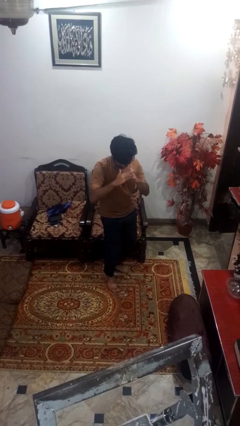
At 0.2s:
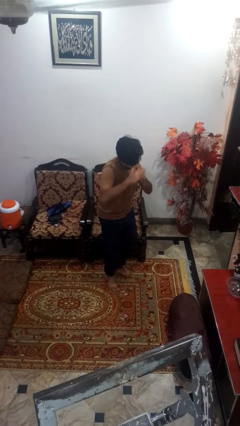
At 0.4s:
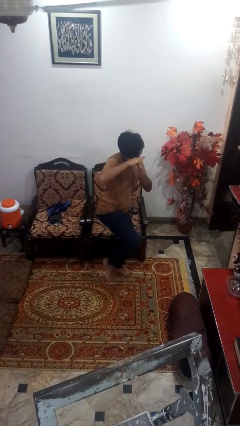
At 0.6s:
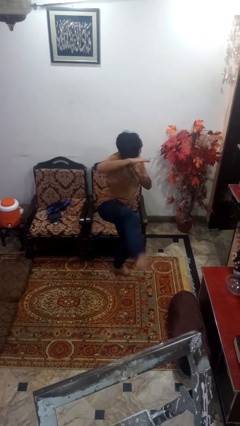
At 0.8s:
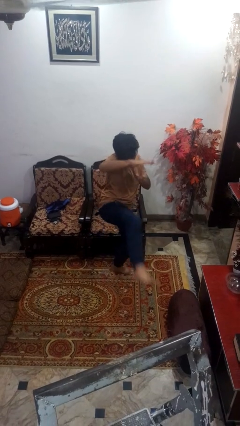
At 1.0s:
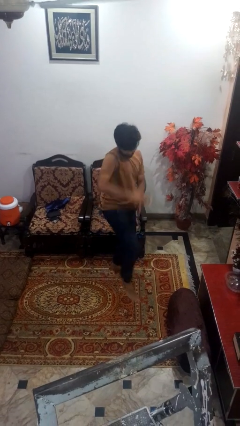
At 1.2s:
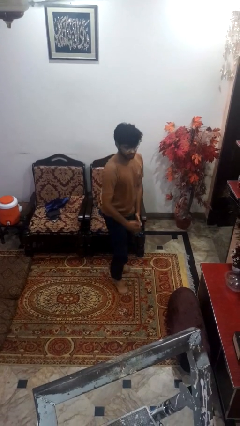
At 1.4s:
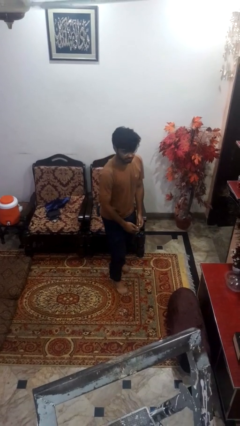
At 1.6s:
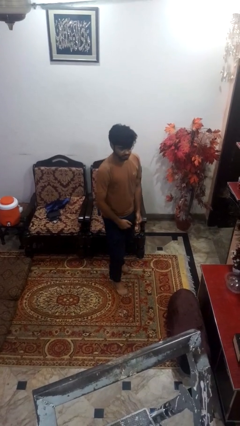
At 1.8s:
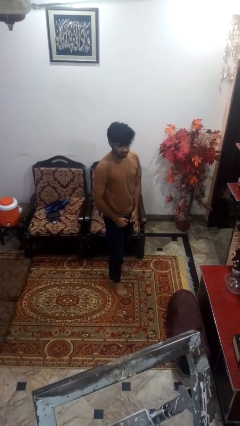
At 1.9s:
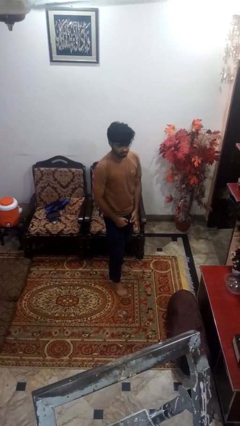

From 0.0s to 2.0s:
person karate kicks

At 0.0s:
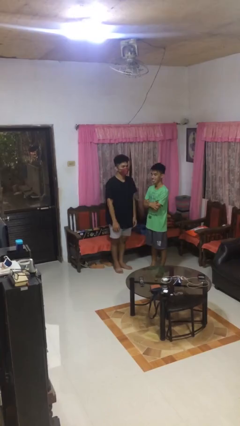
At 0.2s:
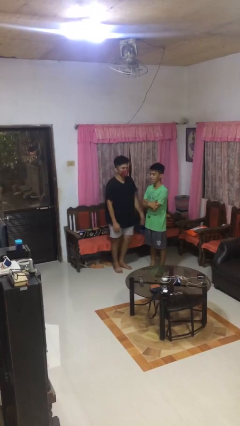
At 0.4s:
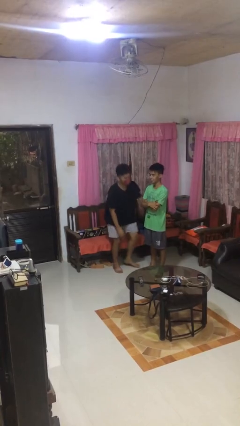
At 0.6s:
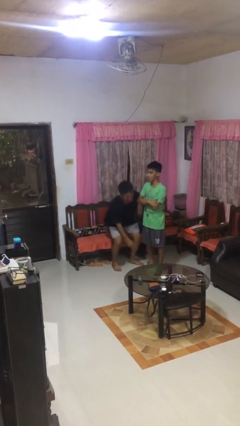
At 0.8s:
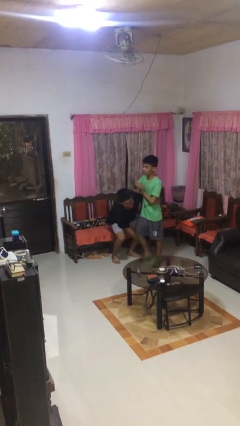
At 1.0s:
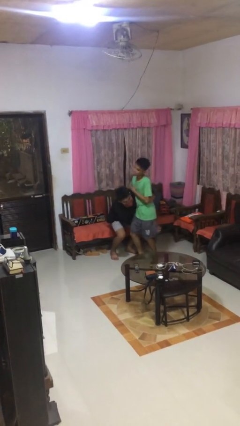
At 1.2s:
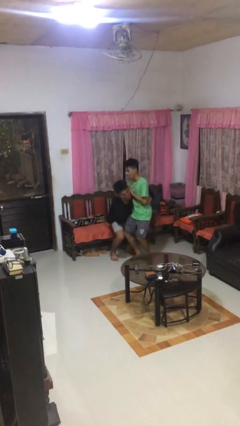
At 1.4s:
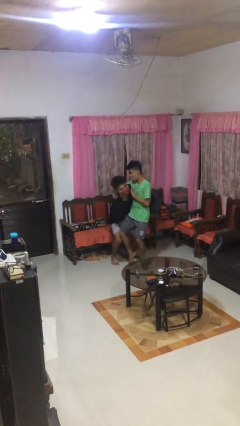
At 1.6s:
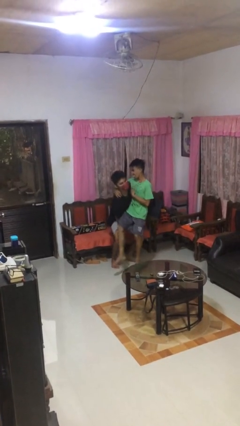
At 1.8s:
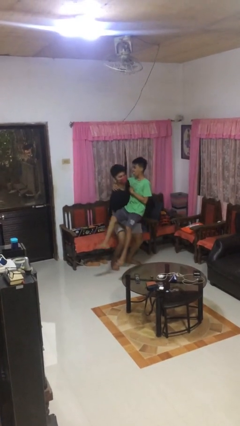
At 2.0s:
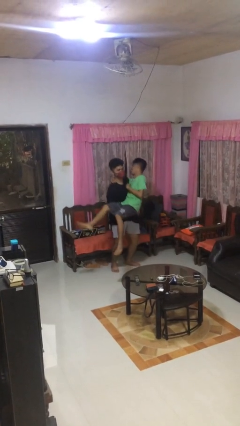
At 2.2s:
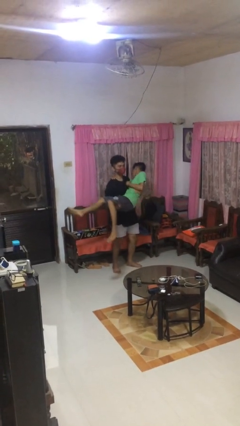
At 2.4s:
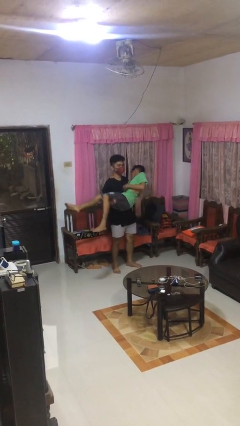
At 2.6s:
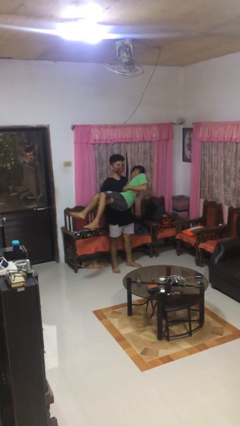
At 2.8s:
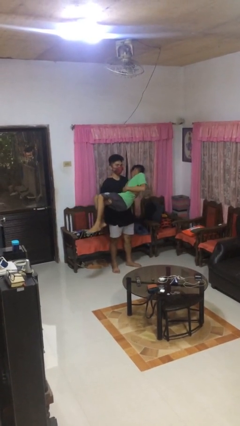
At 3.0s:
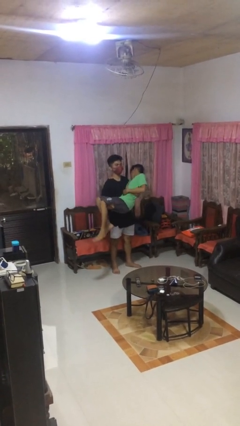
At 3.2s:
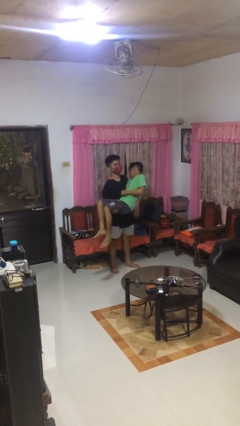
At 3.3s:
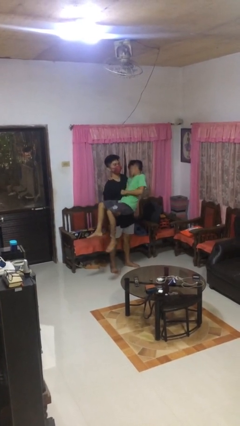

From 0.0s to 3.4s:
person picks up person

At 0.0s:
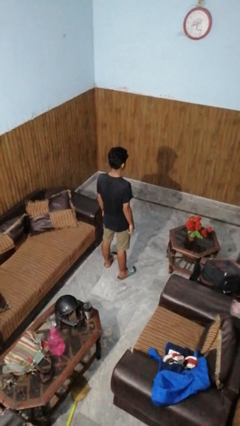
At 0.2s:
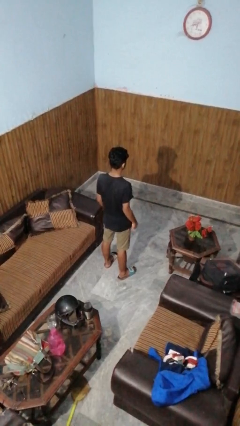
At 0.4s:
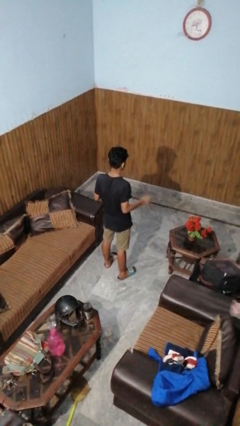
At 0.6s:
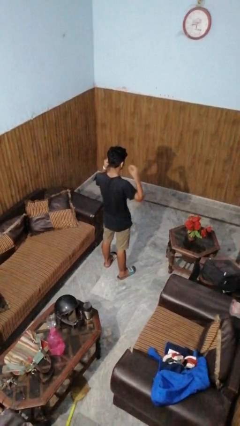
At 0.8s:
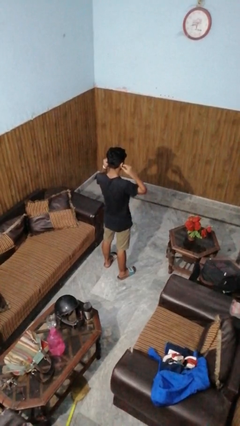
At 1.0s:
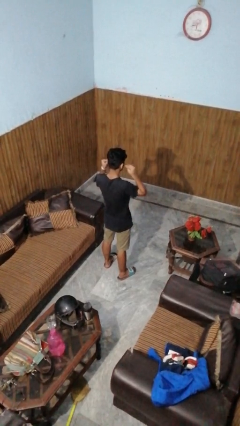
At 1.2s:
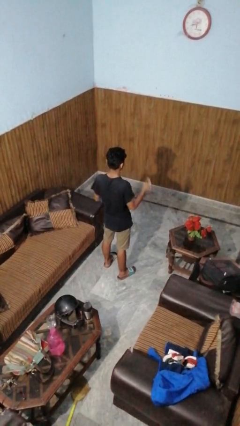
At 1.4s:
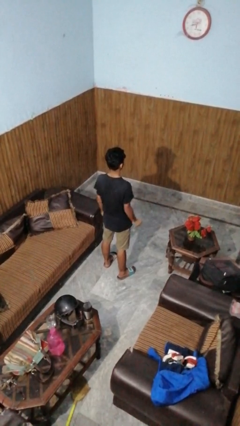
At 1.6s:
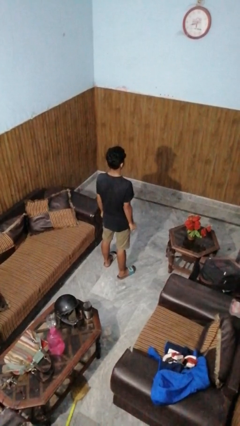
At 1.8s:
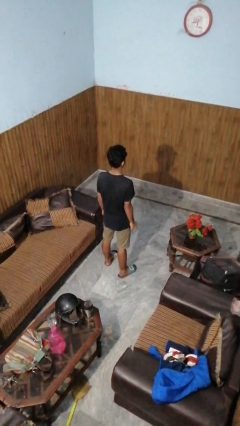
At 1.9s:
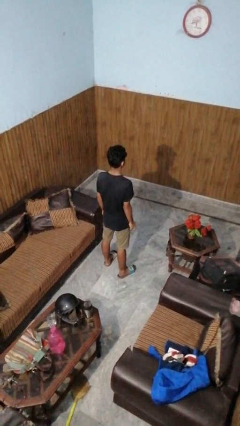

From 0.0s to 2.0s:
person takes off headphones

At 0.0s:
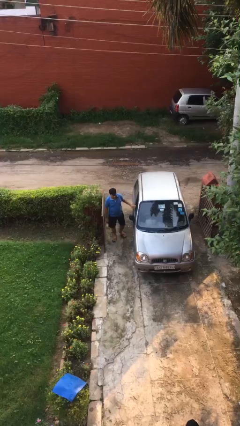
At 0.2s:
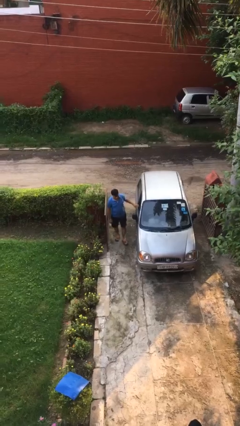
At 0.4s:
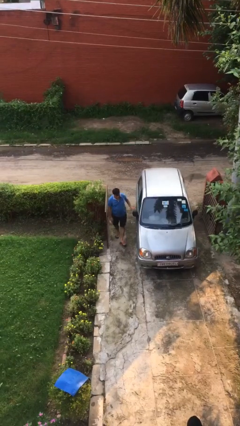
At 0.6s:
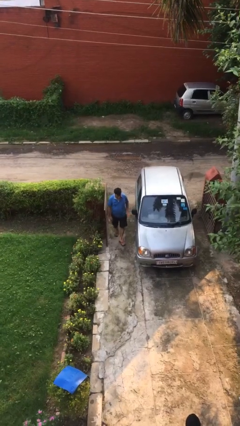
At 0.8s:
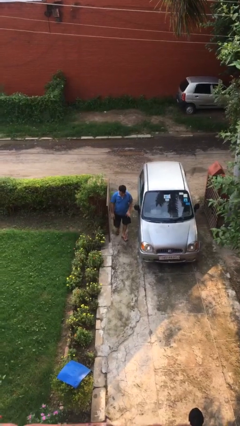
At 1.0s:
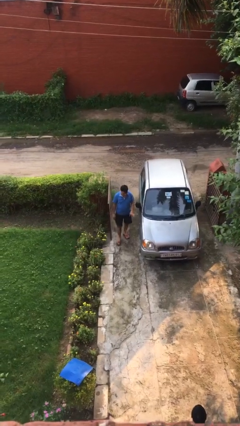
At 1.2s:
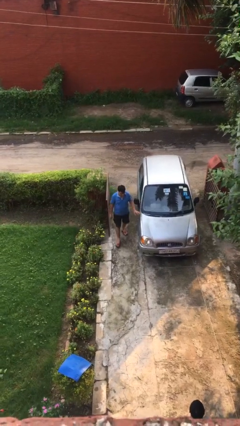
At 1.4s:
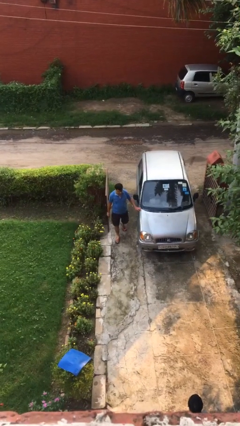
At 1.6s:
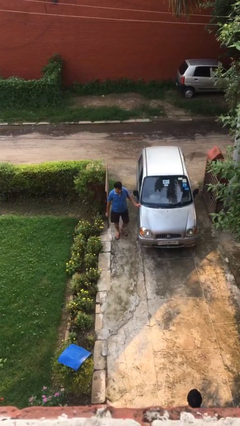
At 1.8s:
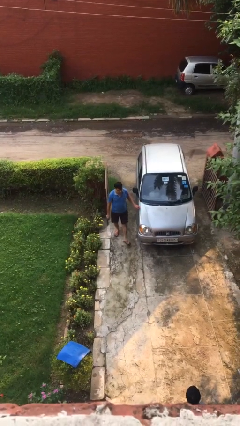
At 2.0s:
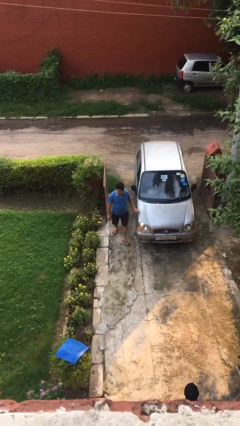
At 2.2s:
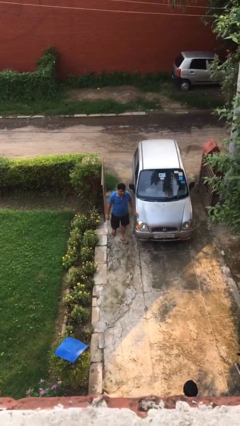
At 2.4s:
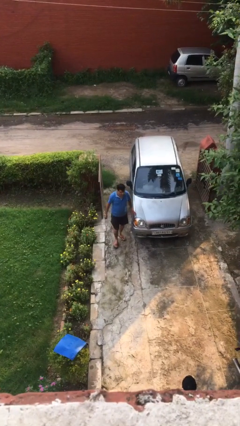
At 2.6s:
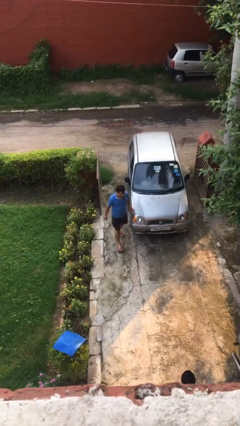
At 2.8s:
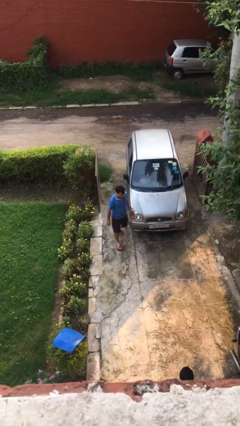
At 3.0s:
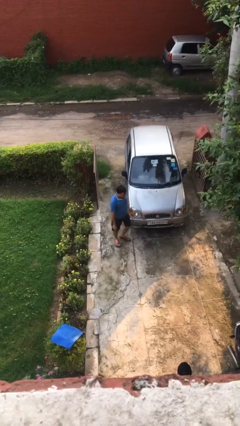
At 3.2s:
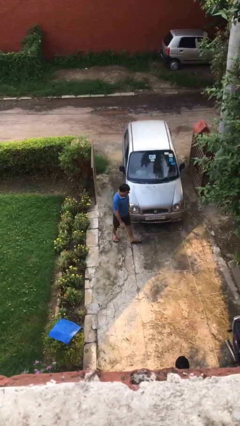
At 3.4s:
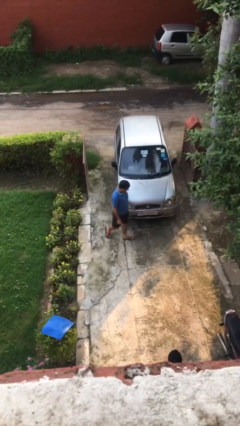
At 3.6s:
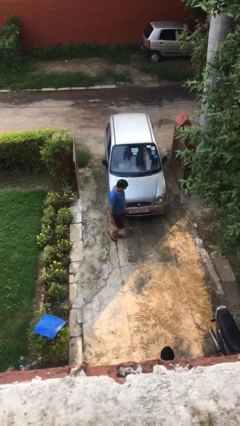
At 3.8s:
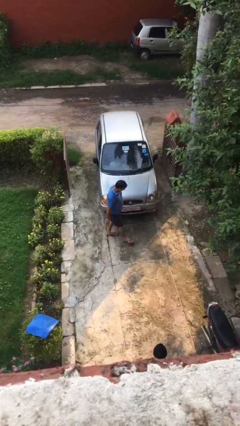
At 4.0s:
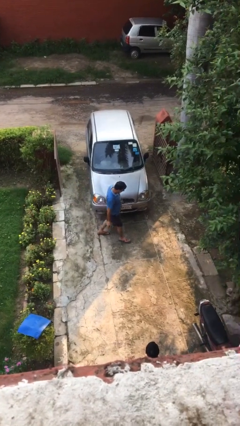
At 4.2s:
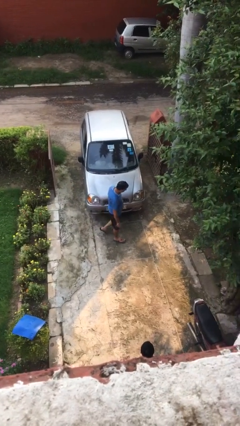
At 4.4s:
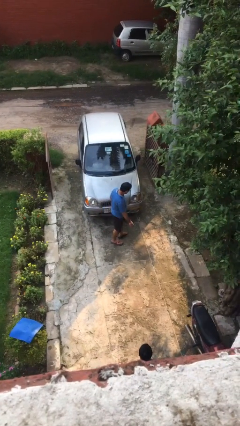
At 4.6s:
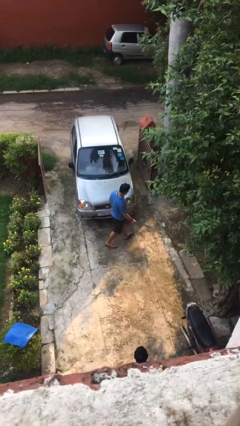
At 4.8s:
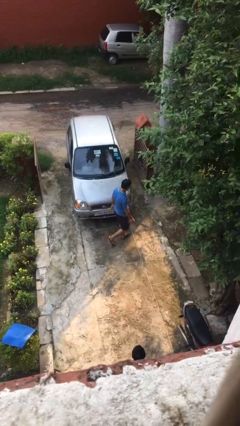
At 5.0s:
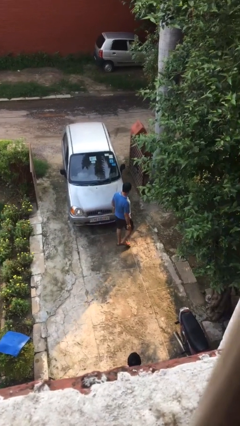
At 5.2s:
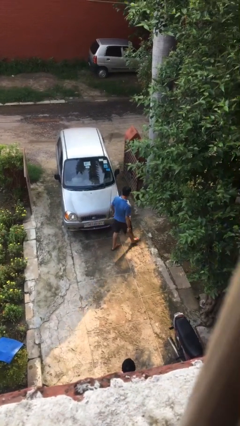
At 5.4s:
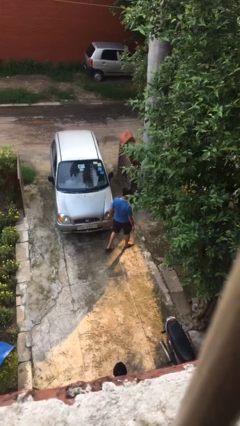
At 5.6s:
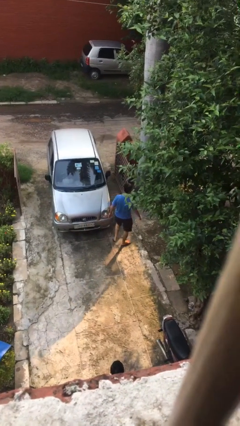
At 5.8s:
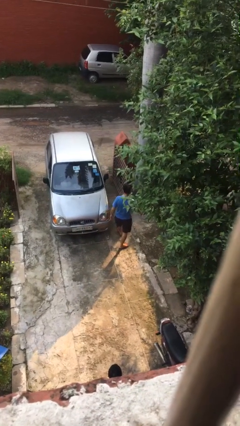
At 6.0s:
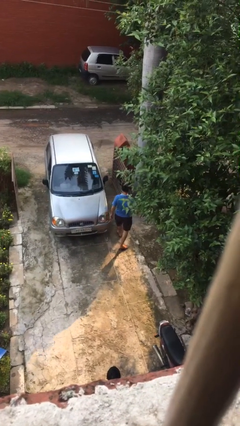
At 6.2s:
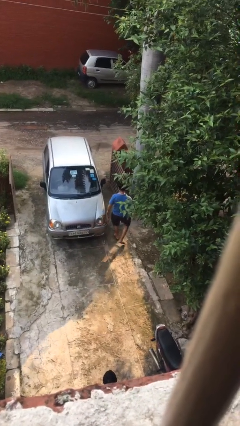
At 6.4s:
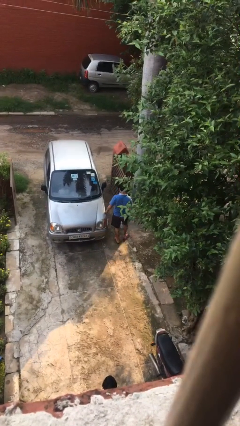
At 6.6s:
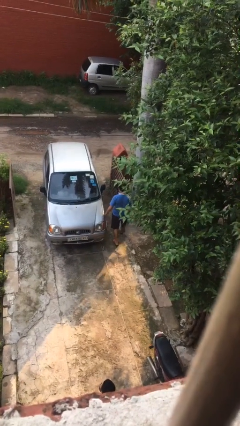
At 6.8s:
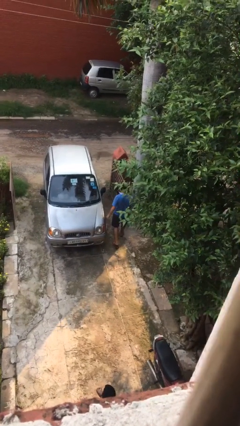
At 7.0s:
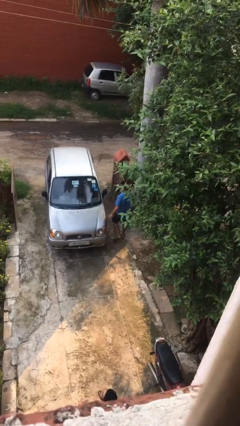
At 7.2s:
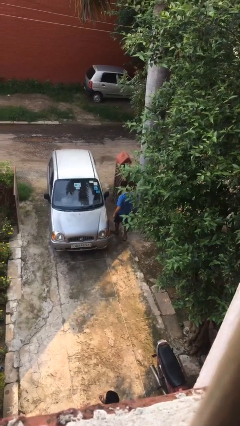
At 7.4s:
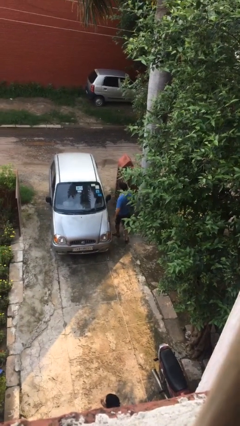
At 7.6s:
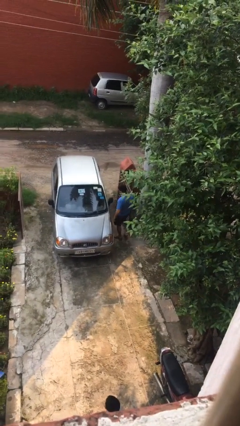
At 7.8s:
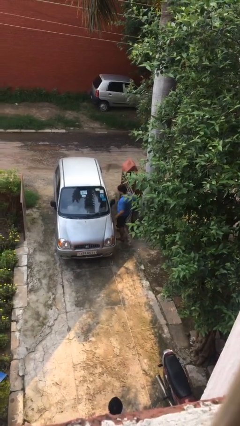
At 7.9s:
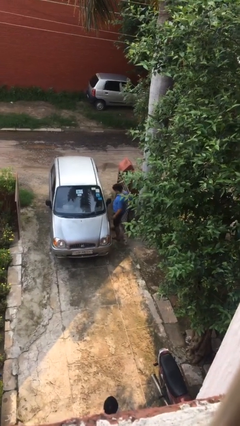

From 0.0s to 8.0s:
person walks around car

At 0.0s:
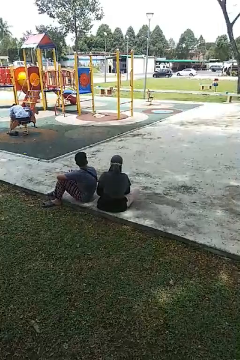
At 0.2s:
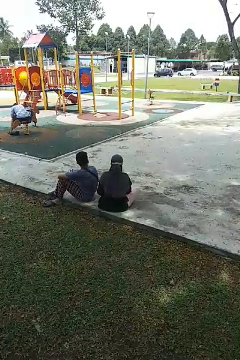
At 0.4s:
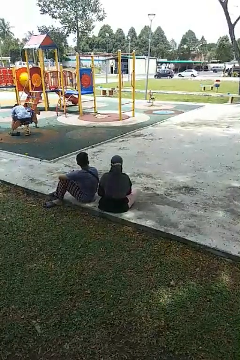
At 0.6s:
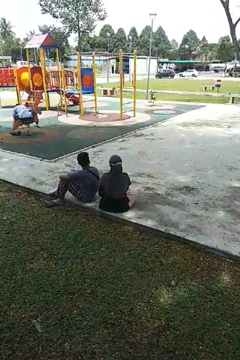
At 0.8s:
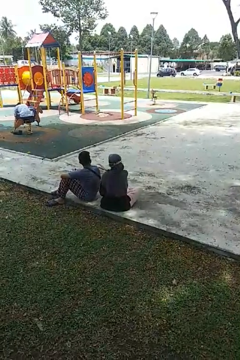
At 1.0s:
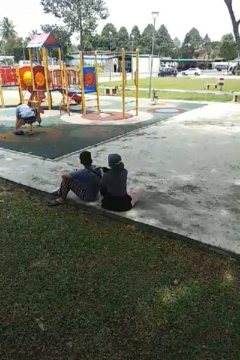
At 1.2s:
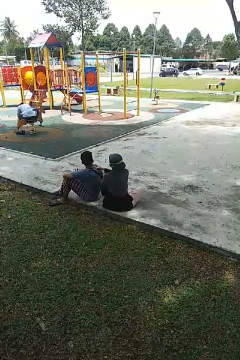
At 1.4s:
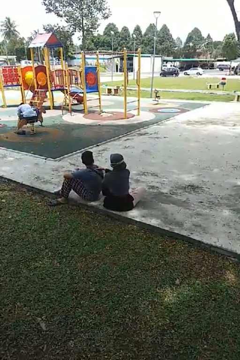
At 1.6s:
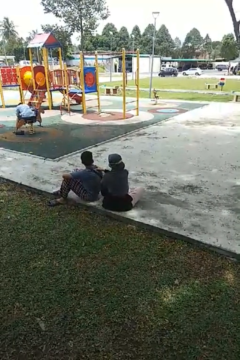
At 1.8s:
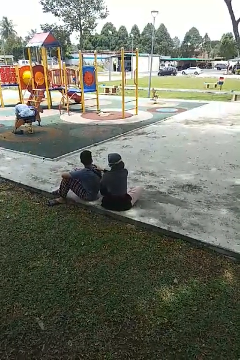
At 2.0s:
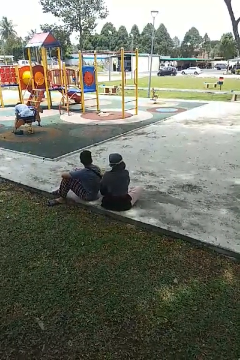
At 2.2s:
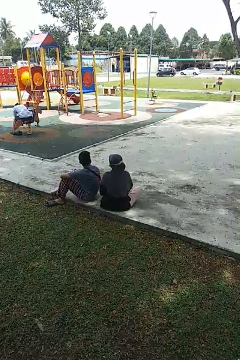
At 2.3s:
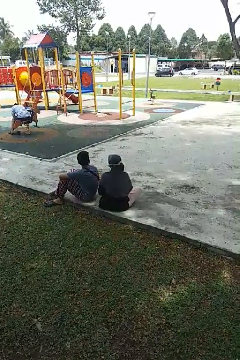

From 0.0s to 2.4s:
person pounds shoulders of person

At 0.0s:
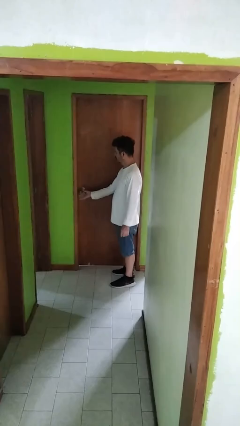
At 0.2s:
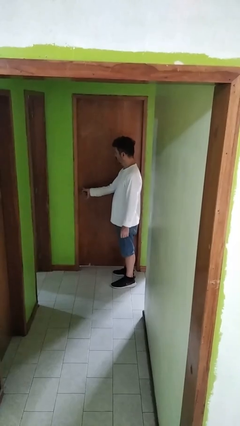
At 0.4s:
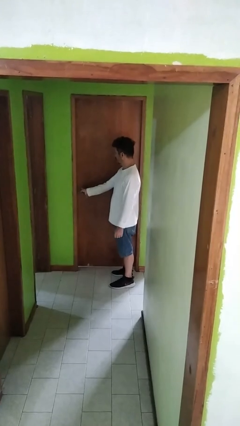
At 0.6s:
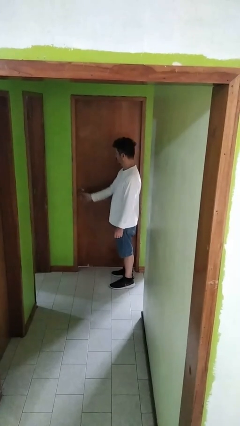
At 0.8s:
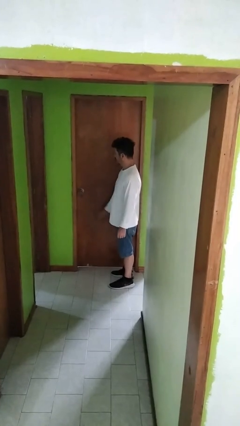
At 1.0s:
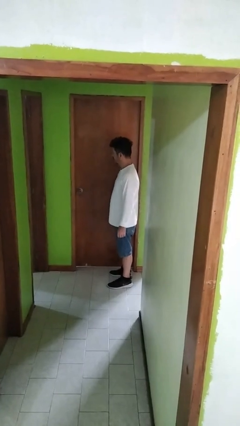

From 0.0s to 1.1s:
person locks door with keys
